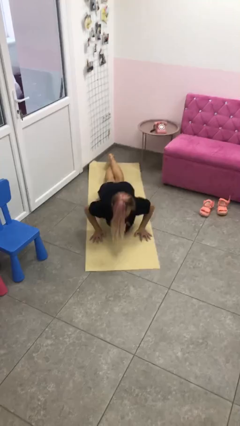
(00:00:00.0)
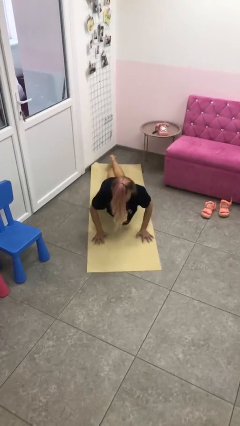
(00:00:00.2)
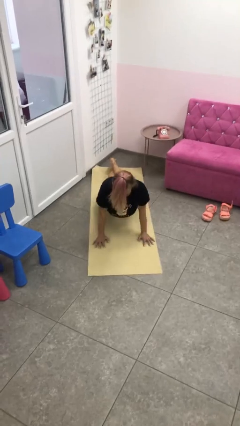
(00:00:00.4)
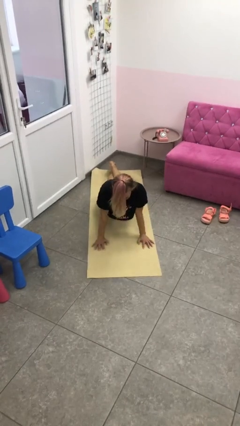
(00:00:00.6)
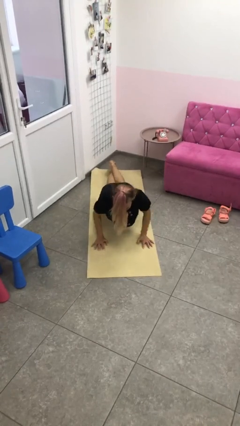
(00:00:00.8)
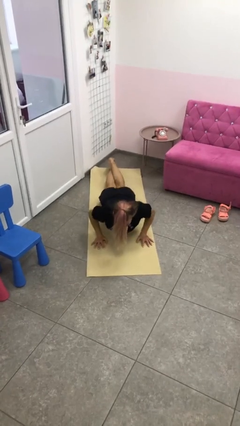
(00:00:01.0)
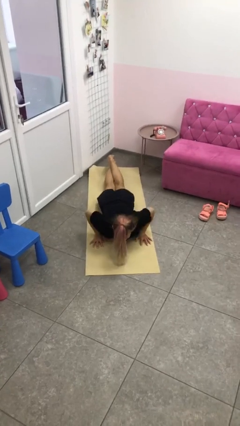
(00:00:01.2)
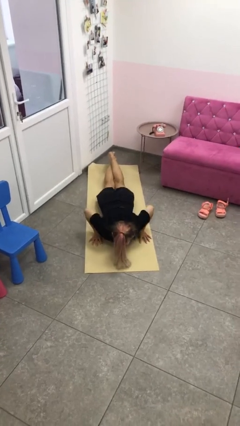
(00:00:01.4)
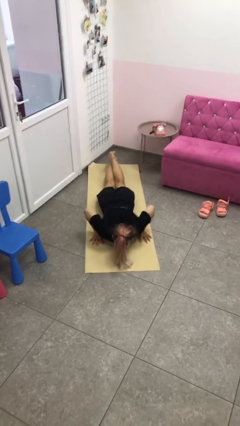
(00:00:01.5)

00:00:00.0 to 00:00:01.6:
person exercises with pushup

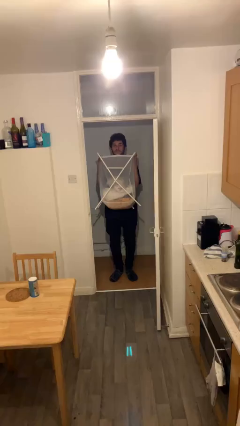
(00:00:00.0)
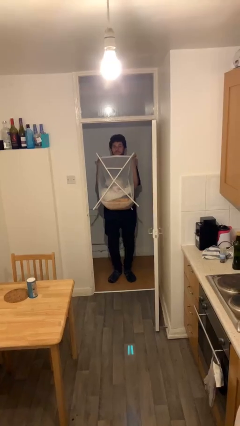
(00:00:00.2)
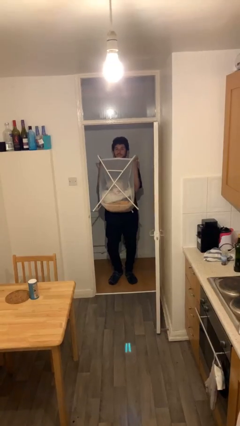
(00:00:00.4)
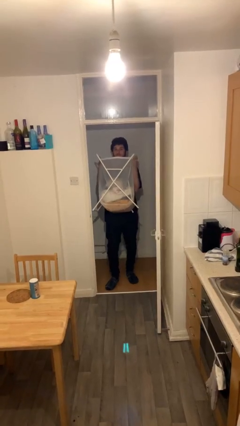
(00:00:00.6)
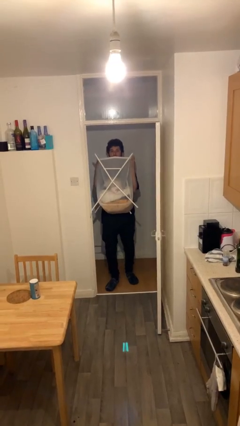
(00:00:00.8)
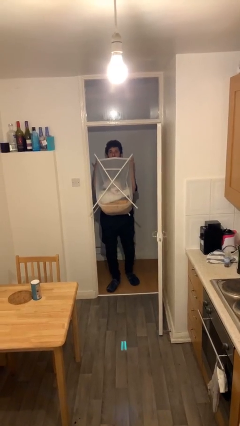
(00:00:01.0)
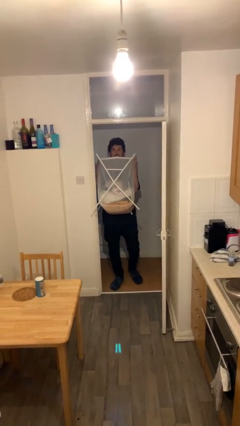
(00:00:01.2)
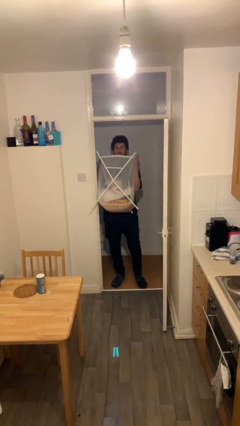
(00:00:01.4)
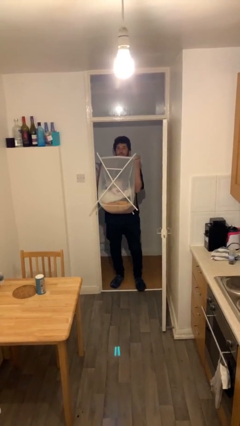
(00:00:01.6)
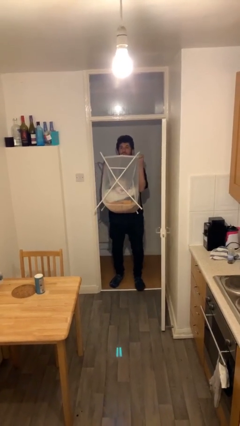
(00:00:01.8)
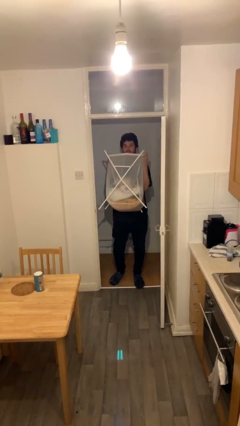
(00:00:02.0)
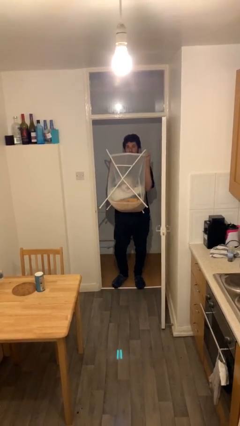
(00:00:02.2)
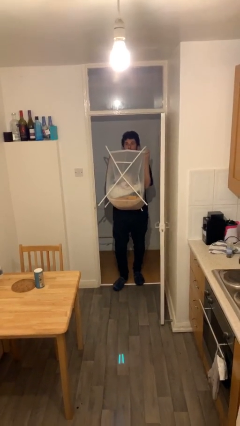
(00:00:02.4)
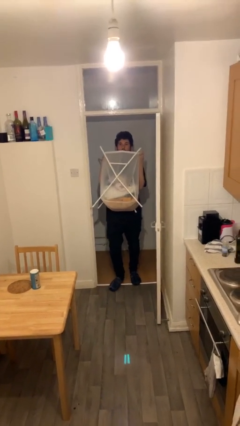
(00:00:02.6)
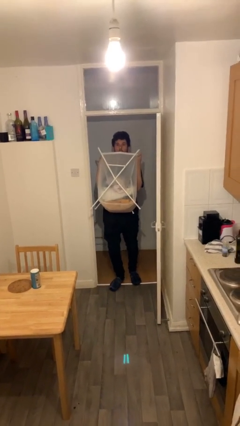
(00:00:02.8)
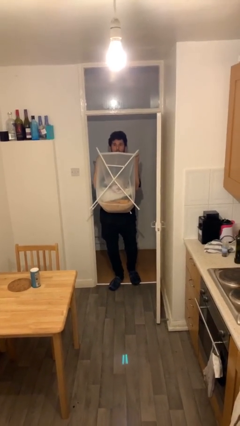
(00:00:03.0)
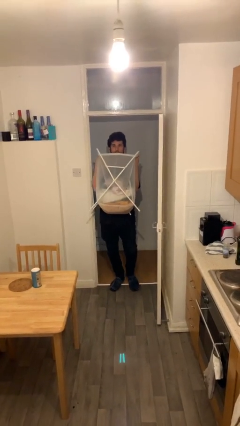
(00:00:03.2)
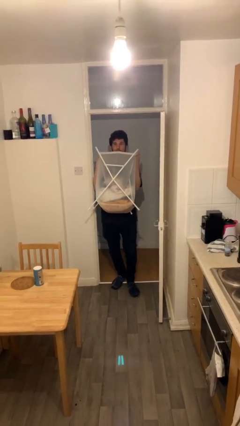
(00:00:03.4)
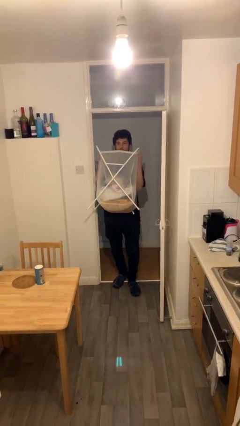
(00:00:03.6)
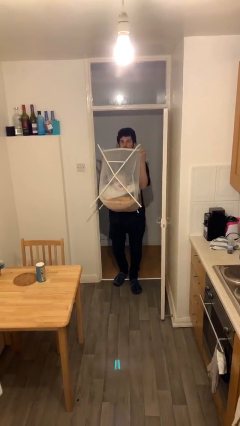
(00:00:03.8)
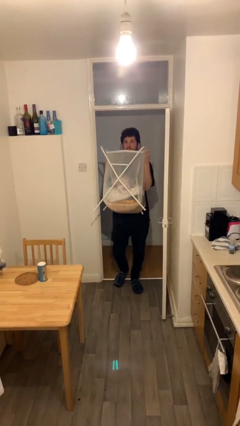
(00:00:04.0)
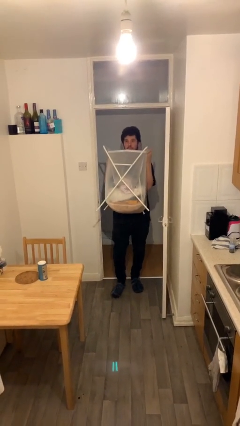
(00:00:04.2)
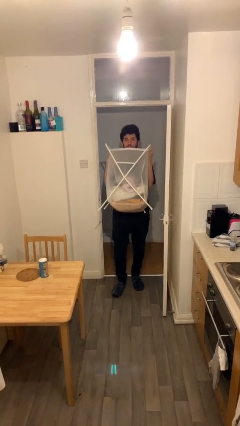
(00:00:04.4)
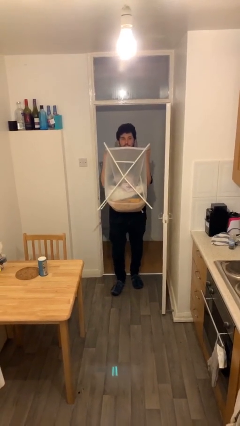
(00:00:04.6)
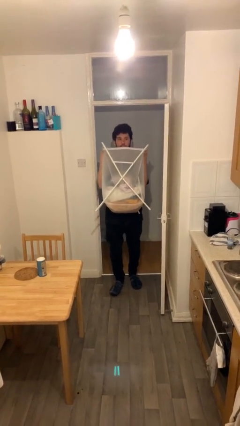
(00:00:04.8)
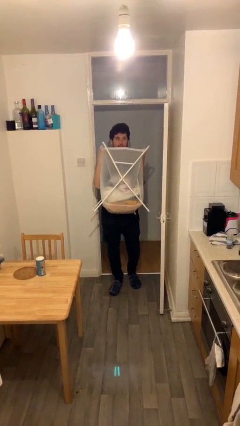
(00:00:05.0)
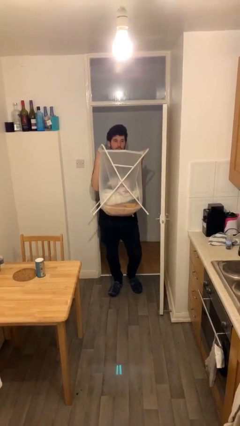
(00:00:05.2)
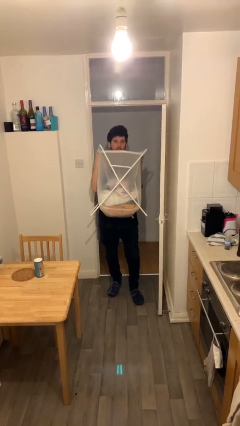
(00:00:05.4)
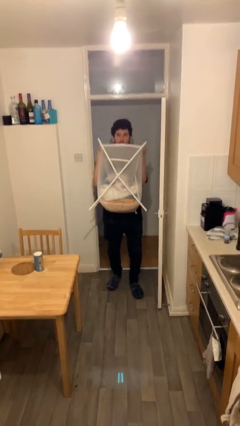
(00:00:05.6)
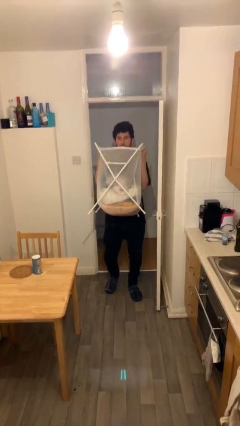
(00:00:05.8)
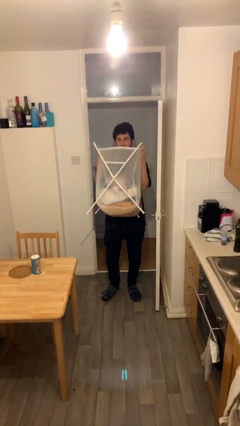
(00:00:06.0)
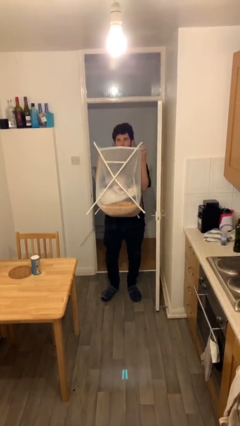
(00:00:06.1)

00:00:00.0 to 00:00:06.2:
person carries heavy object

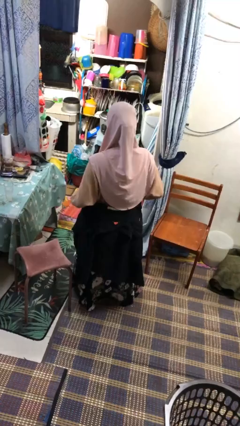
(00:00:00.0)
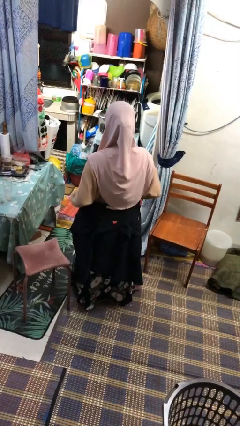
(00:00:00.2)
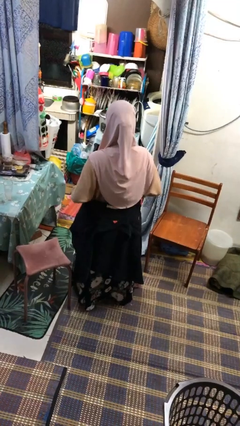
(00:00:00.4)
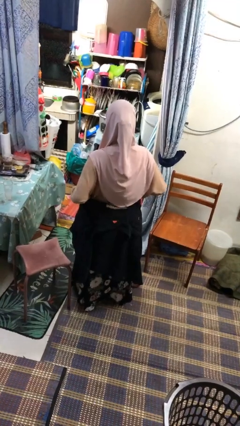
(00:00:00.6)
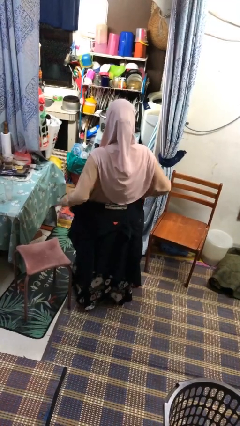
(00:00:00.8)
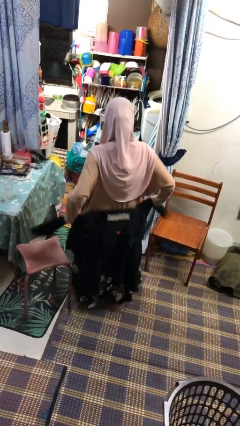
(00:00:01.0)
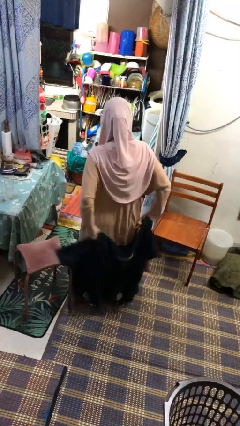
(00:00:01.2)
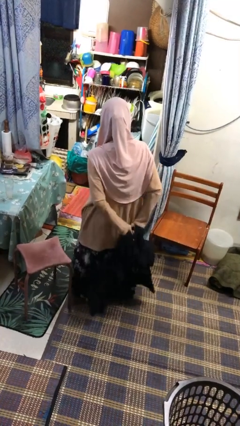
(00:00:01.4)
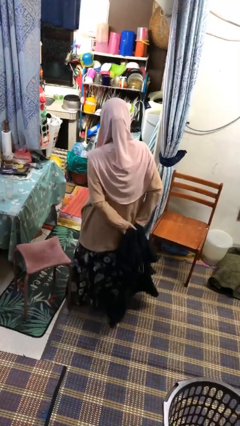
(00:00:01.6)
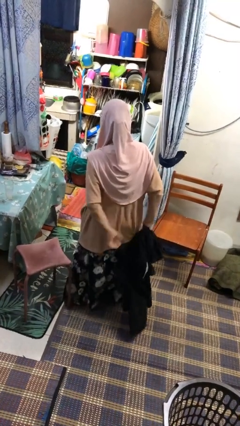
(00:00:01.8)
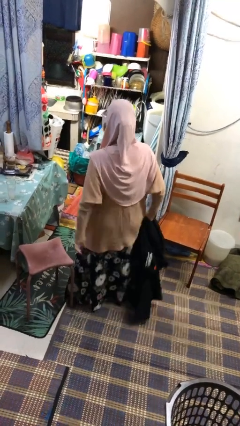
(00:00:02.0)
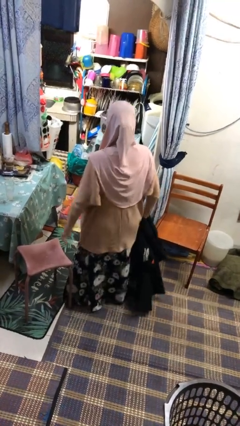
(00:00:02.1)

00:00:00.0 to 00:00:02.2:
person unties jacket around waist

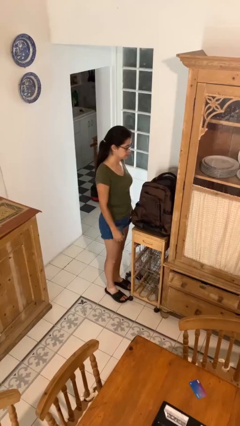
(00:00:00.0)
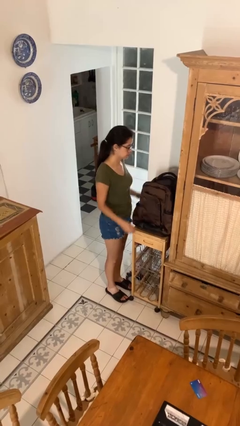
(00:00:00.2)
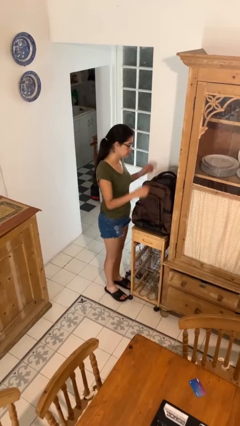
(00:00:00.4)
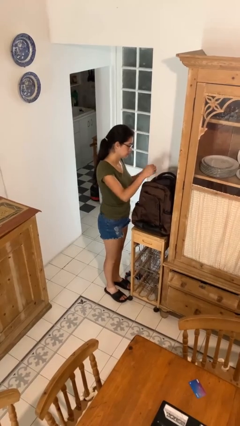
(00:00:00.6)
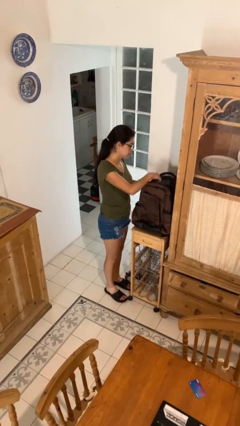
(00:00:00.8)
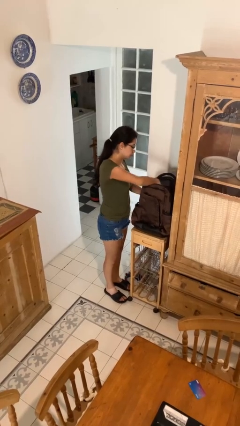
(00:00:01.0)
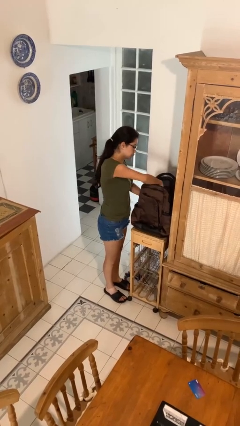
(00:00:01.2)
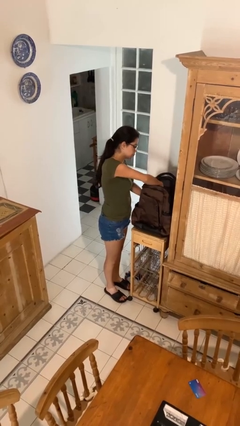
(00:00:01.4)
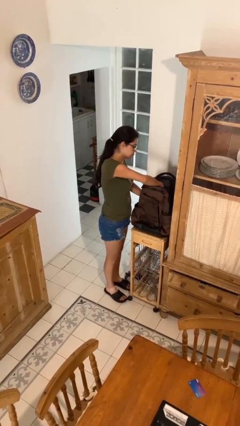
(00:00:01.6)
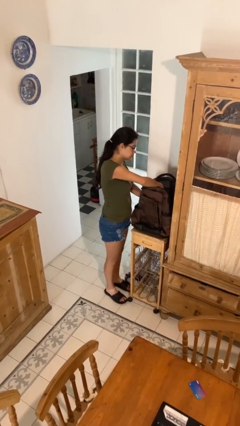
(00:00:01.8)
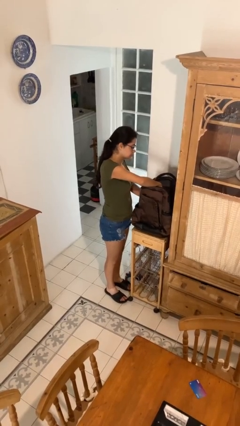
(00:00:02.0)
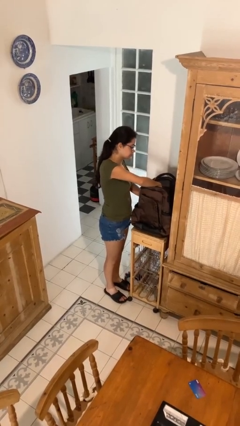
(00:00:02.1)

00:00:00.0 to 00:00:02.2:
person searches in backpack

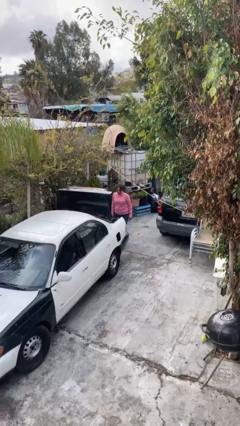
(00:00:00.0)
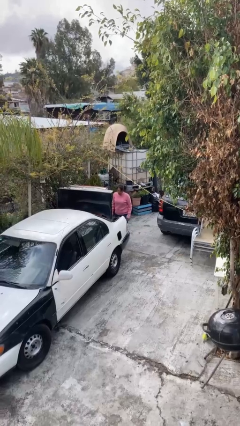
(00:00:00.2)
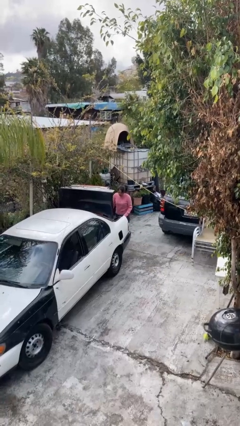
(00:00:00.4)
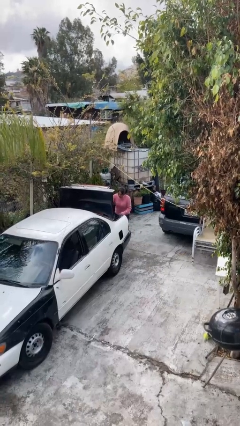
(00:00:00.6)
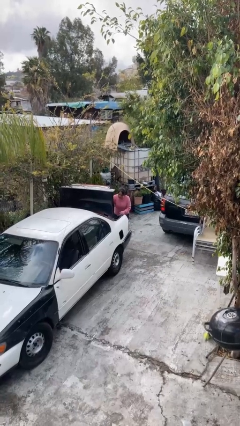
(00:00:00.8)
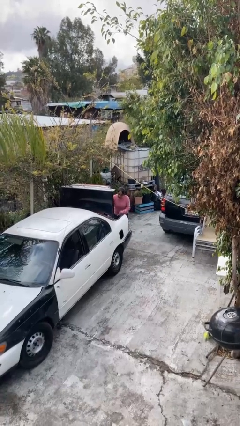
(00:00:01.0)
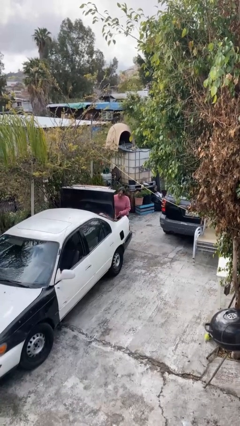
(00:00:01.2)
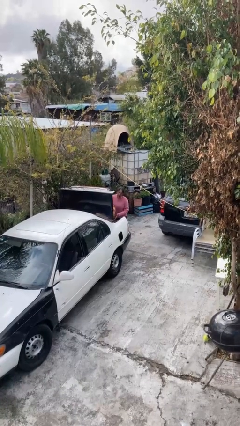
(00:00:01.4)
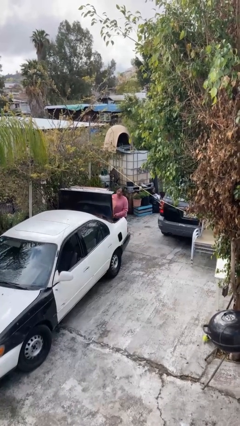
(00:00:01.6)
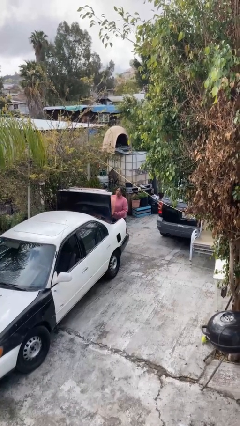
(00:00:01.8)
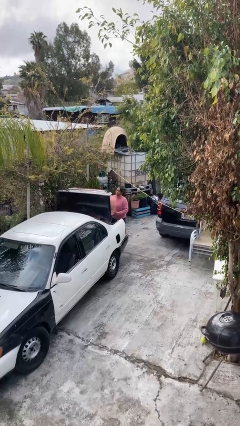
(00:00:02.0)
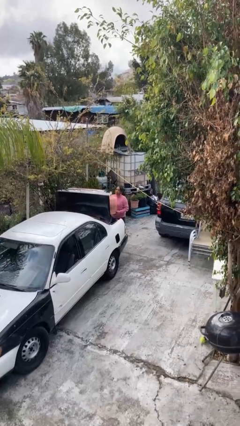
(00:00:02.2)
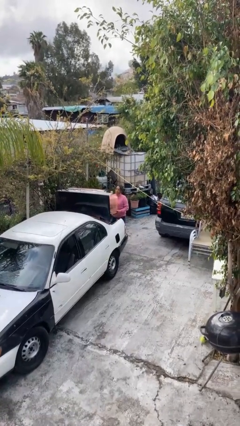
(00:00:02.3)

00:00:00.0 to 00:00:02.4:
person unloads car

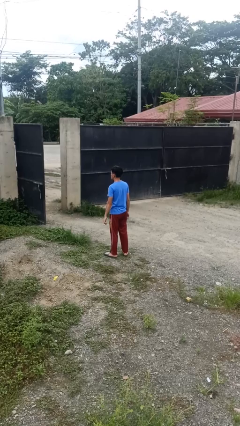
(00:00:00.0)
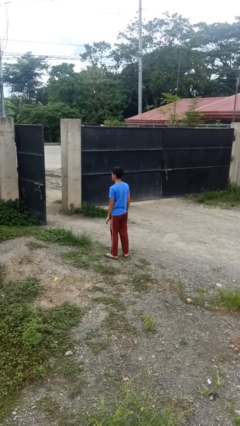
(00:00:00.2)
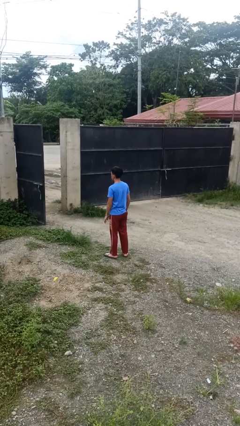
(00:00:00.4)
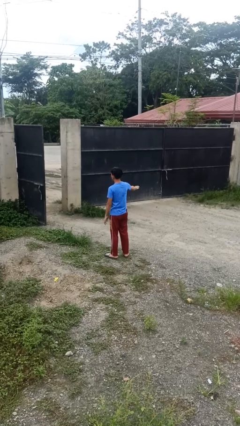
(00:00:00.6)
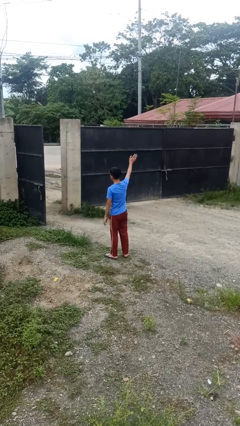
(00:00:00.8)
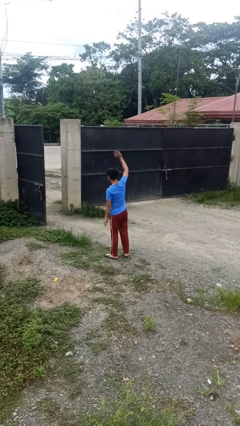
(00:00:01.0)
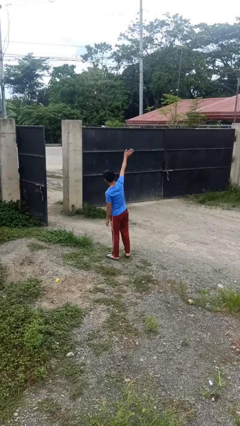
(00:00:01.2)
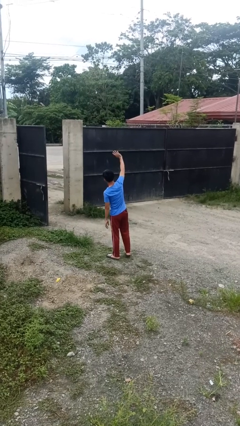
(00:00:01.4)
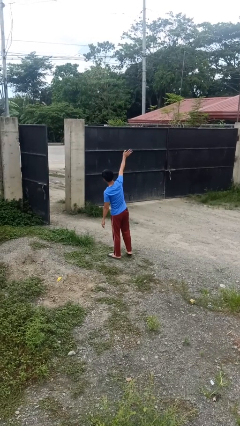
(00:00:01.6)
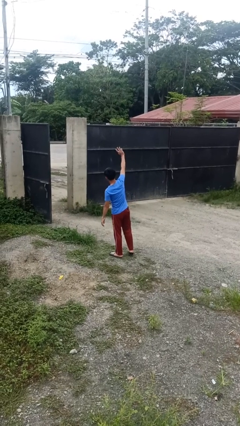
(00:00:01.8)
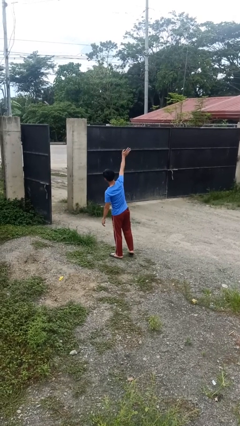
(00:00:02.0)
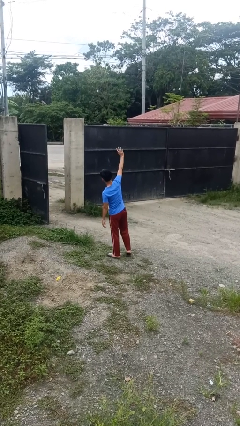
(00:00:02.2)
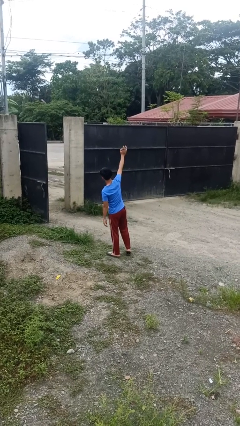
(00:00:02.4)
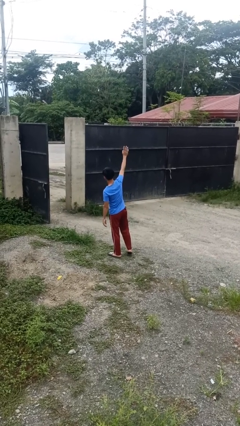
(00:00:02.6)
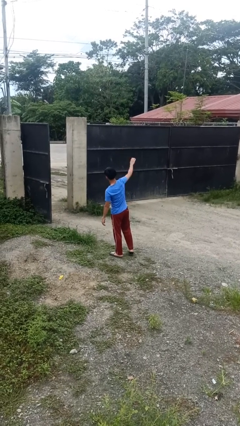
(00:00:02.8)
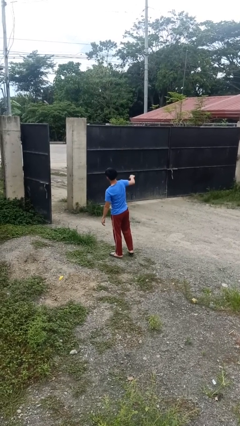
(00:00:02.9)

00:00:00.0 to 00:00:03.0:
person waves at person
